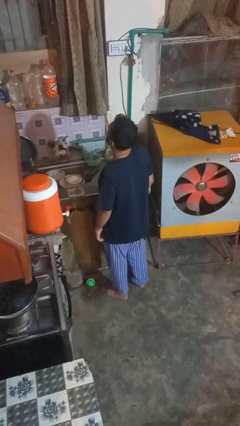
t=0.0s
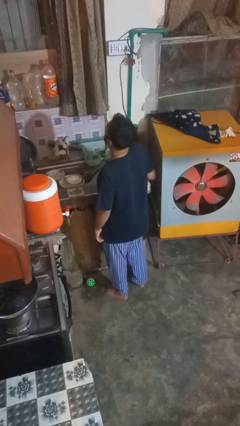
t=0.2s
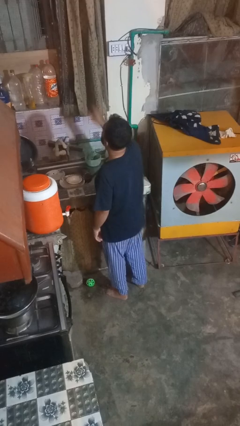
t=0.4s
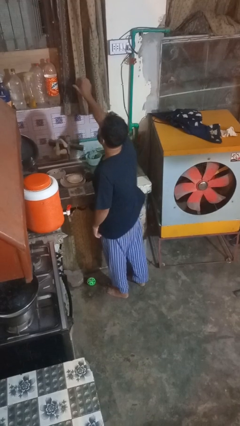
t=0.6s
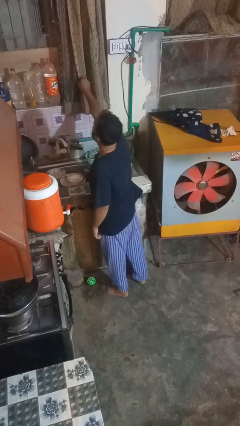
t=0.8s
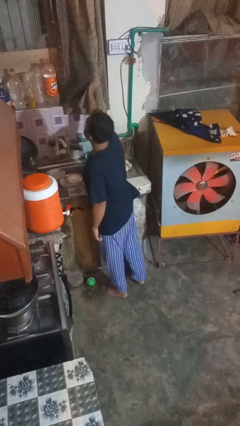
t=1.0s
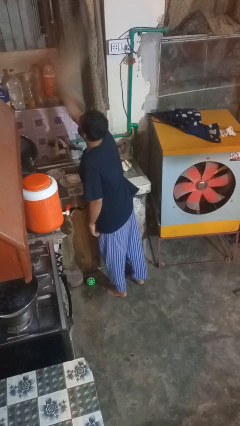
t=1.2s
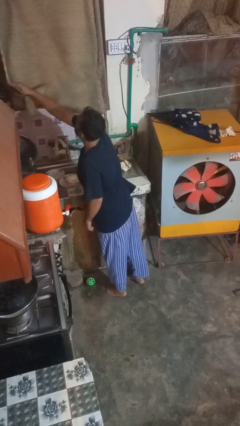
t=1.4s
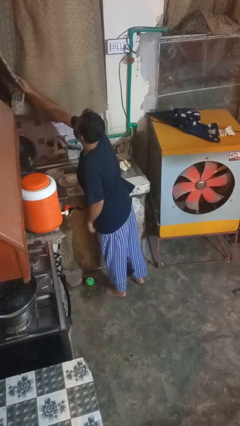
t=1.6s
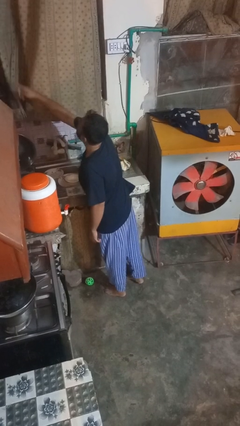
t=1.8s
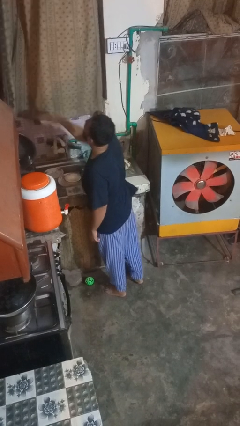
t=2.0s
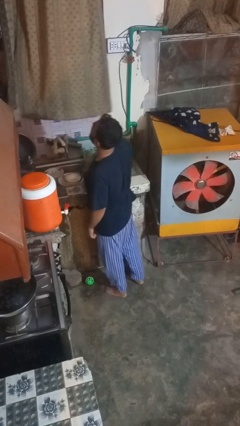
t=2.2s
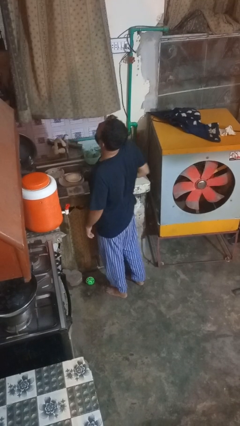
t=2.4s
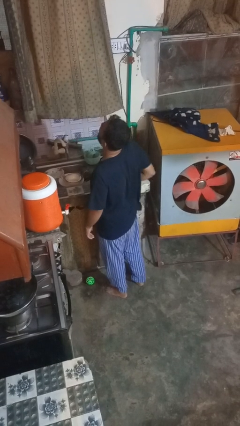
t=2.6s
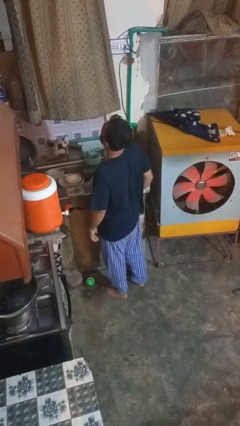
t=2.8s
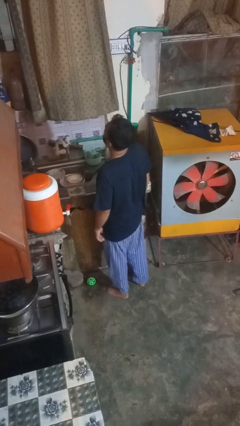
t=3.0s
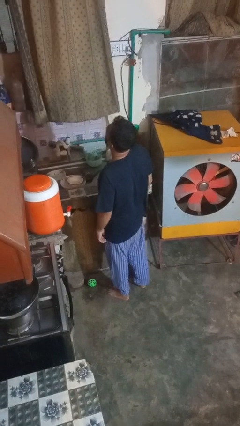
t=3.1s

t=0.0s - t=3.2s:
person closes curtains

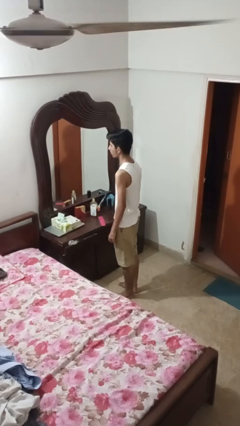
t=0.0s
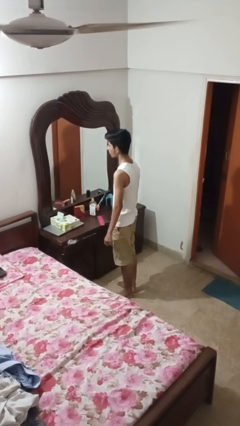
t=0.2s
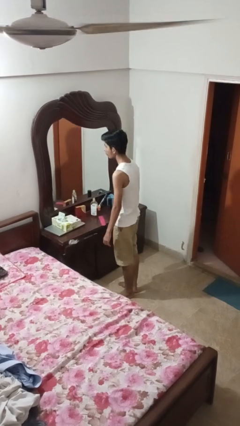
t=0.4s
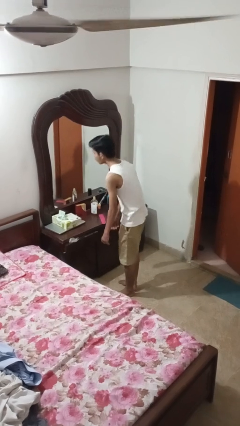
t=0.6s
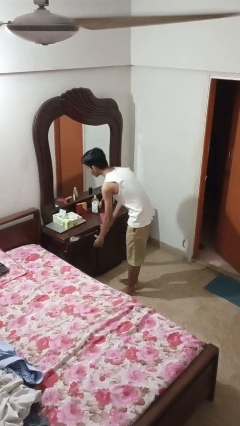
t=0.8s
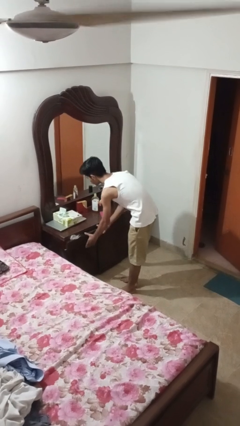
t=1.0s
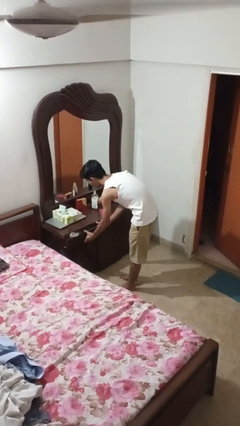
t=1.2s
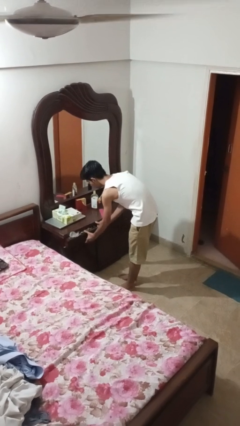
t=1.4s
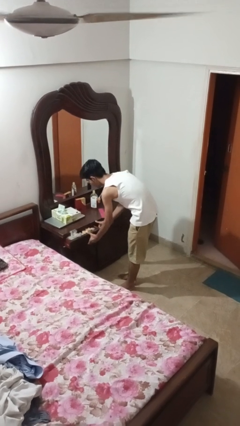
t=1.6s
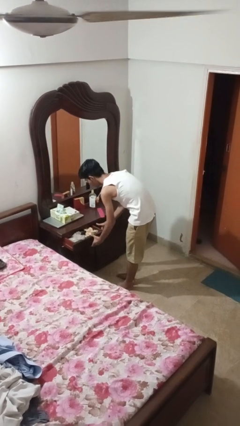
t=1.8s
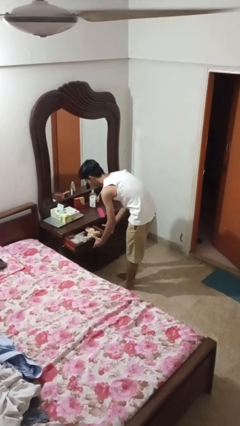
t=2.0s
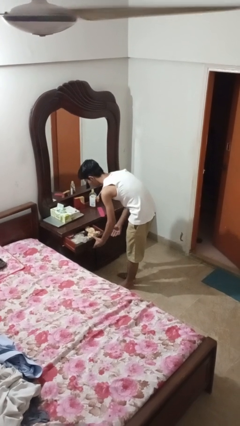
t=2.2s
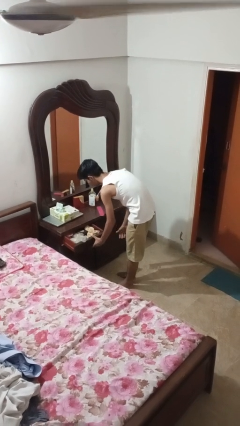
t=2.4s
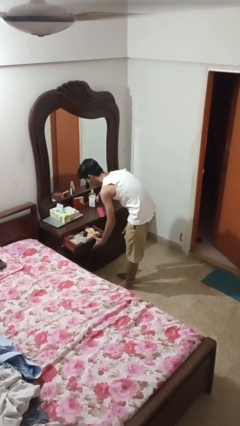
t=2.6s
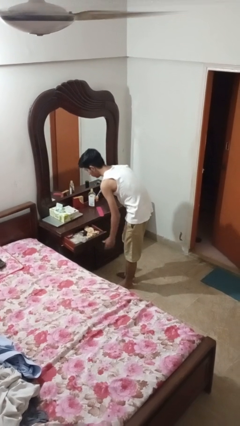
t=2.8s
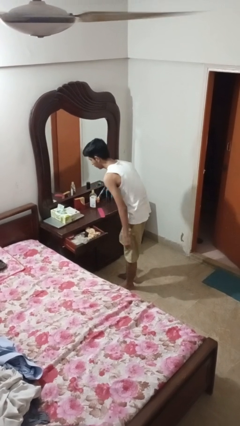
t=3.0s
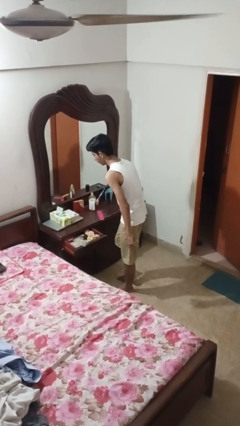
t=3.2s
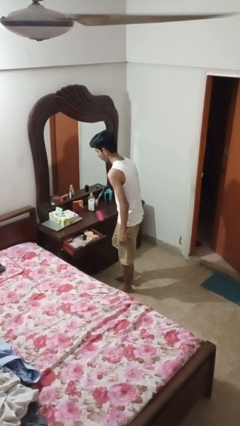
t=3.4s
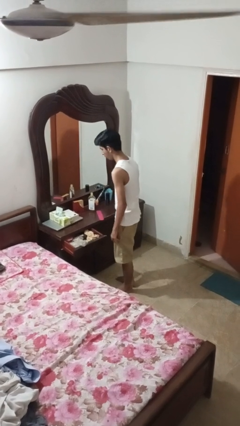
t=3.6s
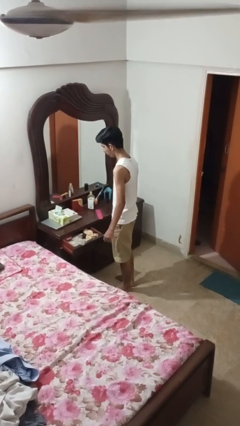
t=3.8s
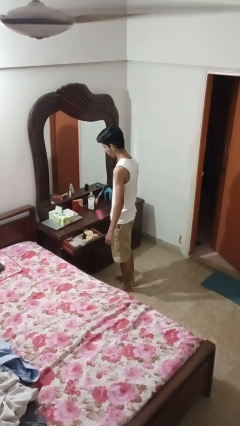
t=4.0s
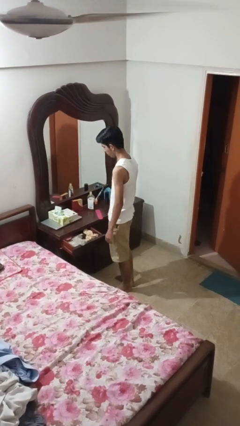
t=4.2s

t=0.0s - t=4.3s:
person opens dresser drawer

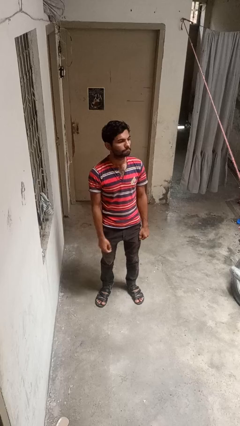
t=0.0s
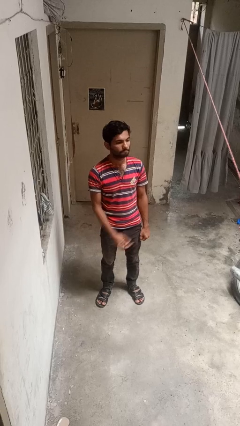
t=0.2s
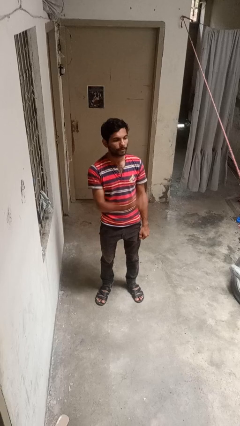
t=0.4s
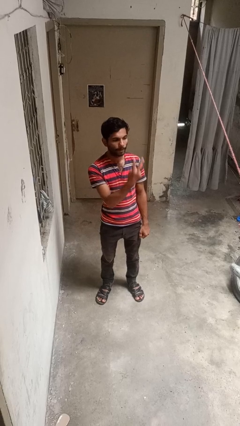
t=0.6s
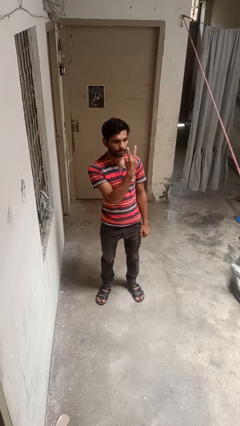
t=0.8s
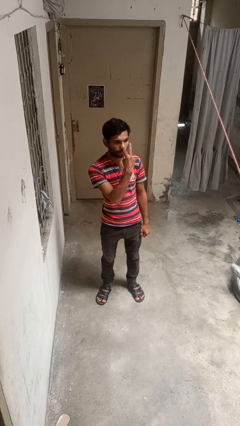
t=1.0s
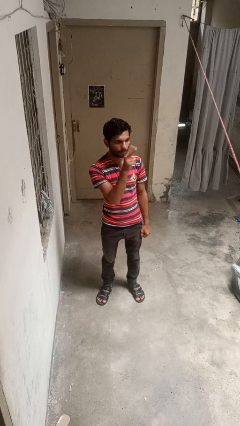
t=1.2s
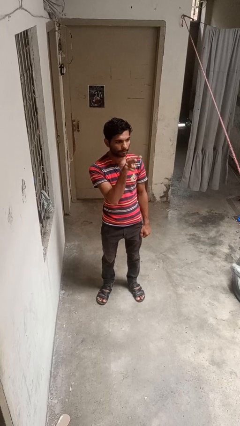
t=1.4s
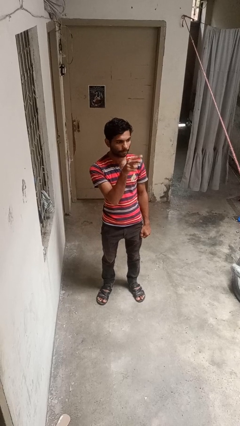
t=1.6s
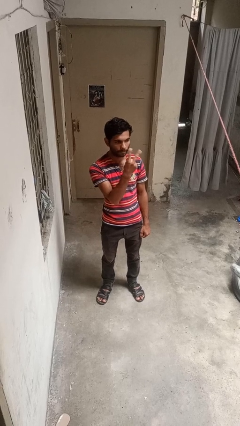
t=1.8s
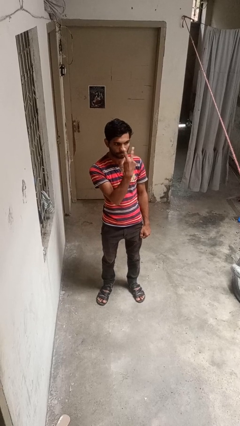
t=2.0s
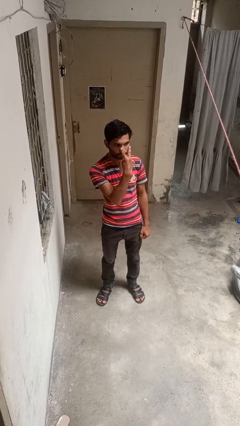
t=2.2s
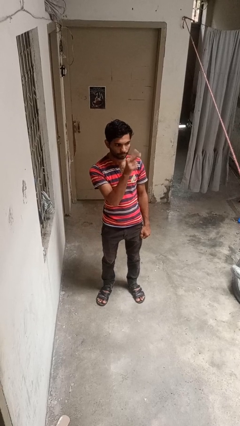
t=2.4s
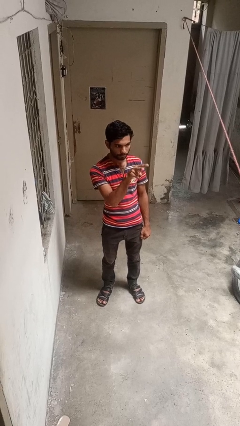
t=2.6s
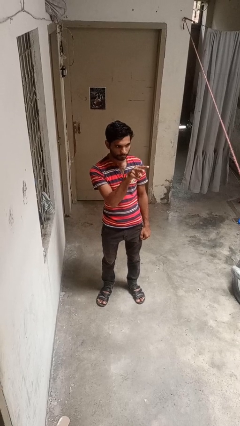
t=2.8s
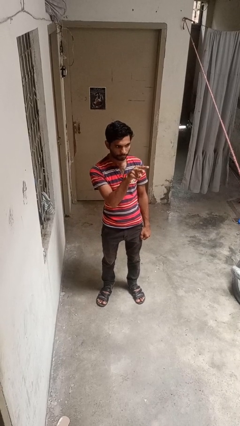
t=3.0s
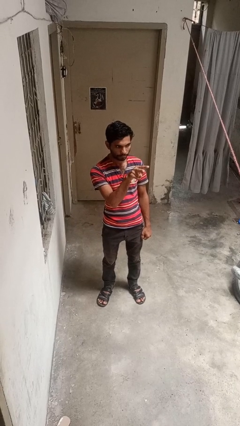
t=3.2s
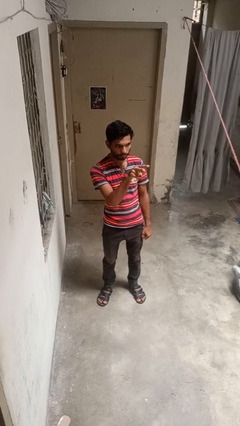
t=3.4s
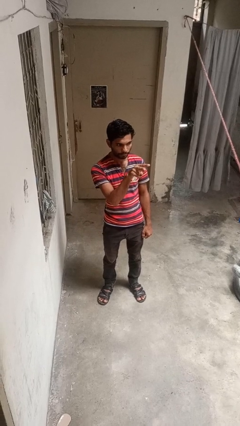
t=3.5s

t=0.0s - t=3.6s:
person gestures watch closely

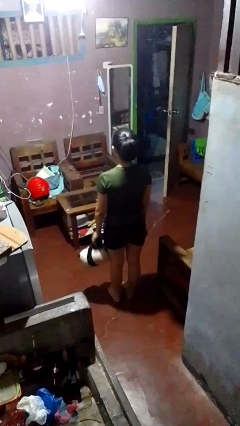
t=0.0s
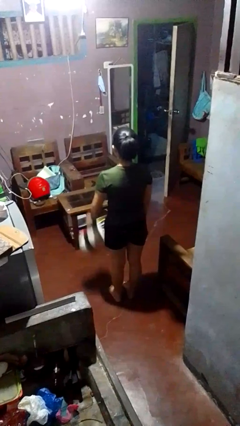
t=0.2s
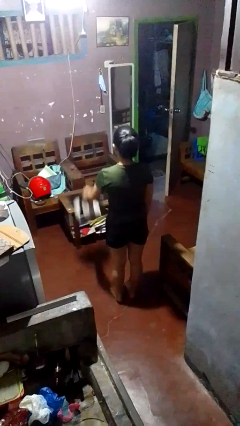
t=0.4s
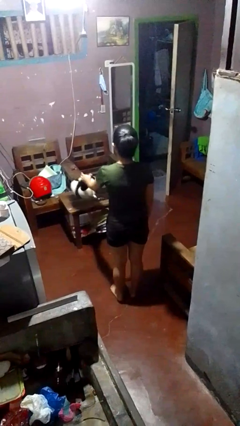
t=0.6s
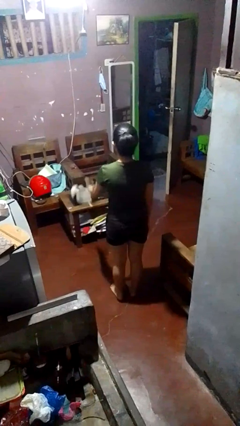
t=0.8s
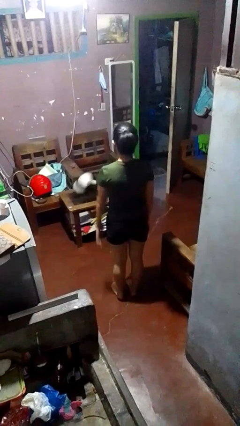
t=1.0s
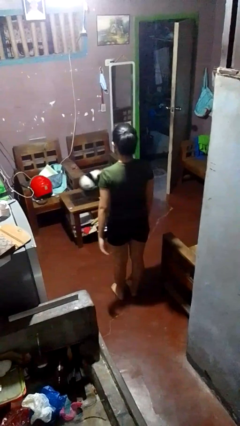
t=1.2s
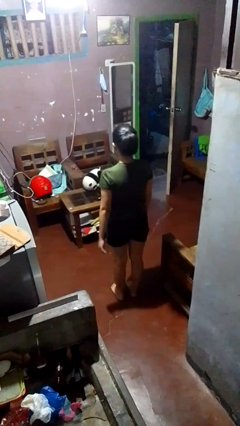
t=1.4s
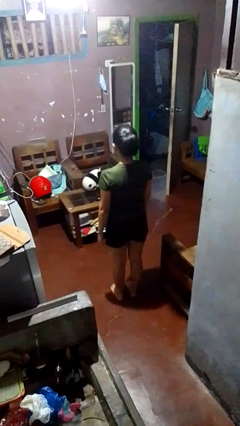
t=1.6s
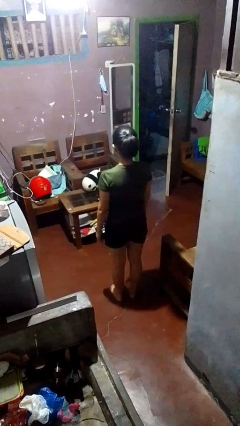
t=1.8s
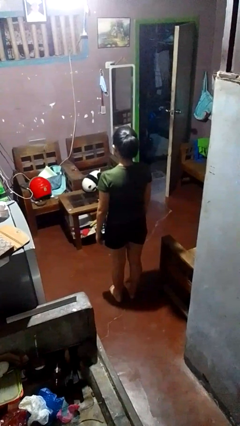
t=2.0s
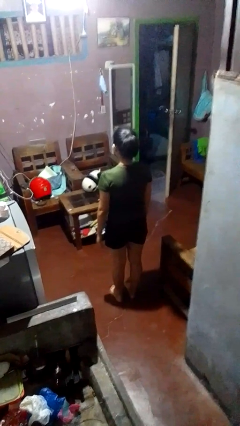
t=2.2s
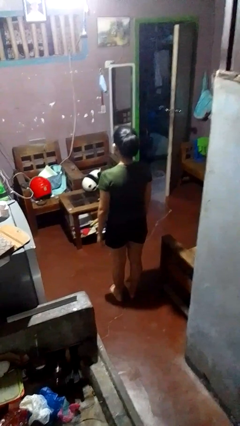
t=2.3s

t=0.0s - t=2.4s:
person throws object on table

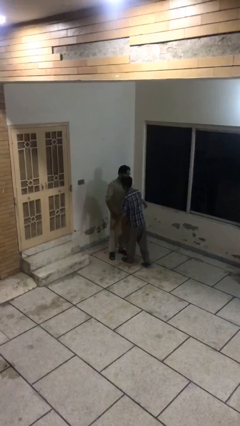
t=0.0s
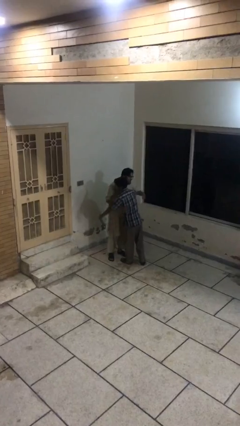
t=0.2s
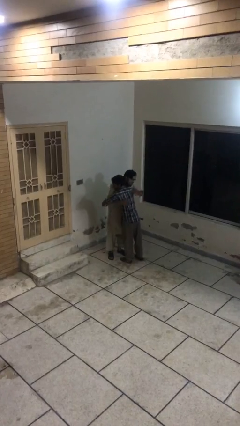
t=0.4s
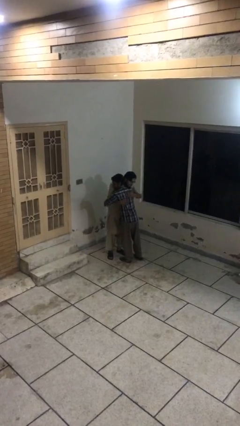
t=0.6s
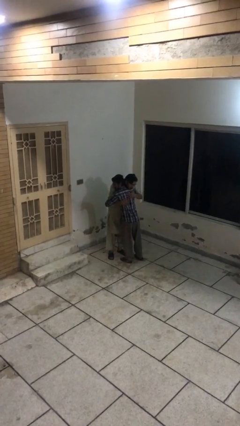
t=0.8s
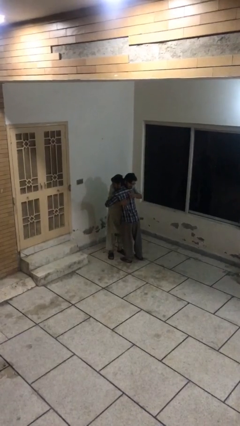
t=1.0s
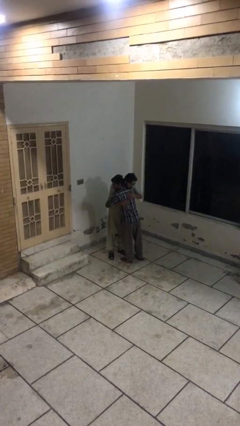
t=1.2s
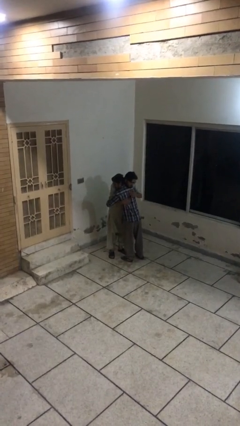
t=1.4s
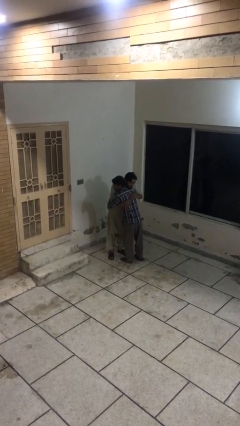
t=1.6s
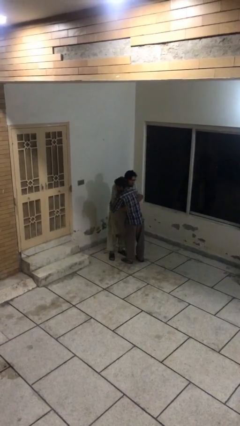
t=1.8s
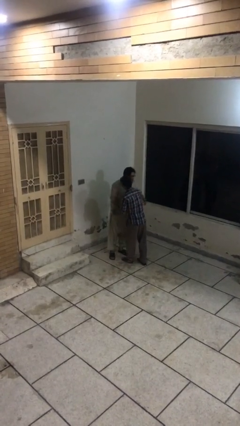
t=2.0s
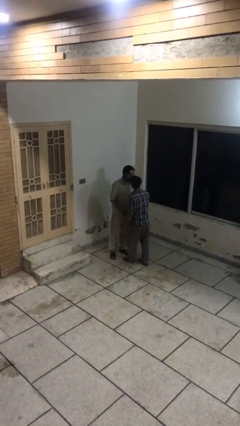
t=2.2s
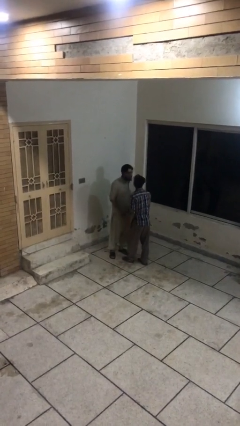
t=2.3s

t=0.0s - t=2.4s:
person embraces person

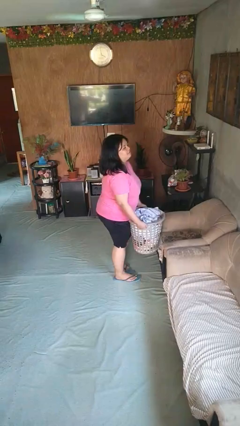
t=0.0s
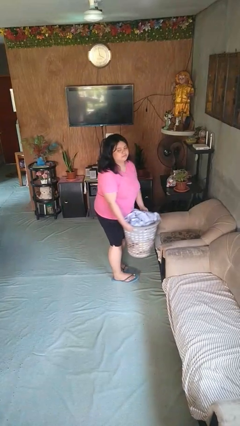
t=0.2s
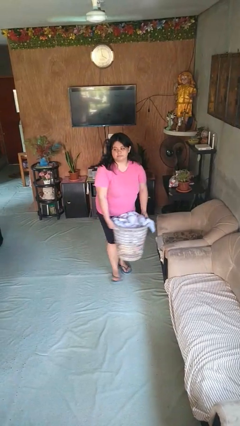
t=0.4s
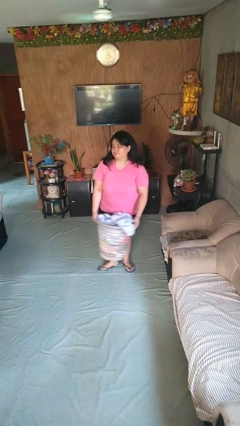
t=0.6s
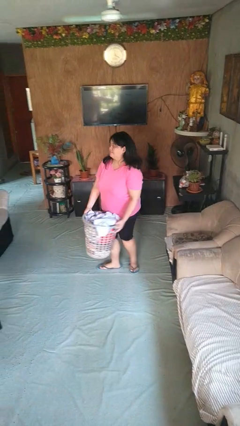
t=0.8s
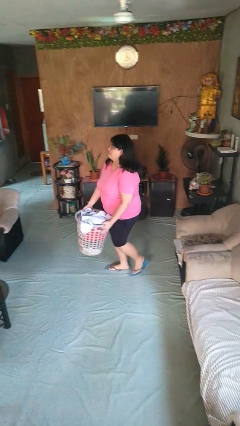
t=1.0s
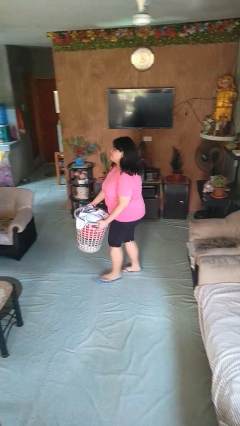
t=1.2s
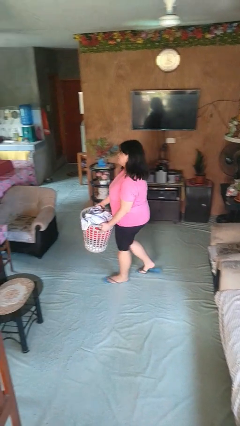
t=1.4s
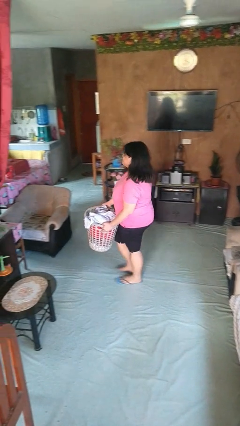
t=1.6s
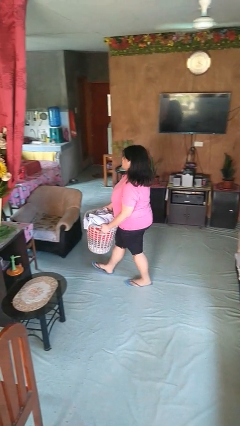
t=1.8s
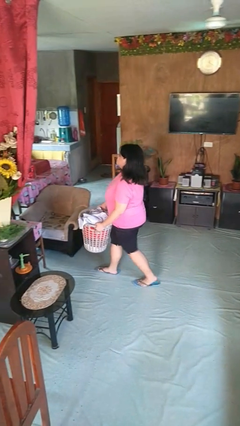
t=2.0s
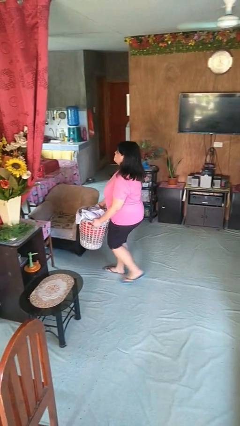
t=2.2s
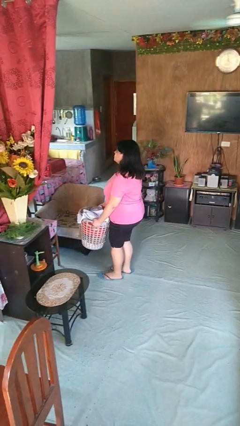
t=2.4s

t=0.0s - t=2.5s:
person carries laundry basket
